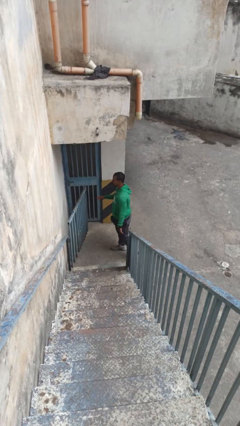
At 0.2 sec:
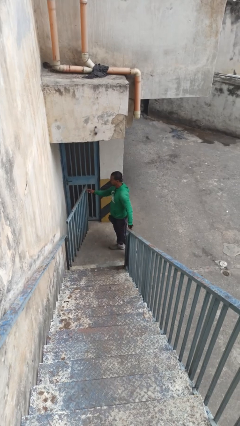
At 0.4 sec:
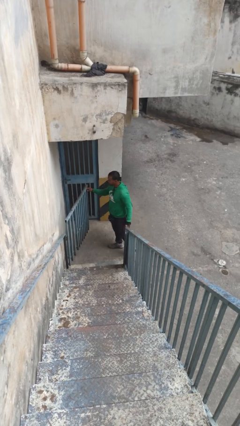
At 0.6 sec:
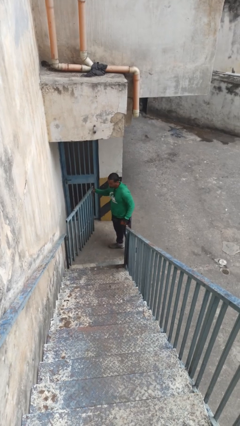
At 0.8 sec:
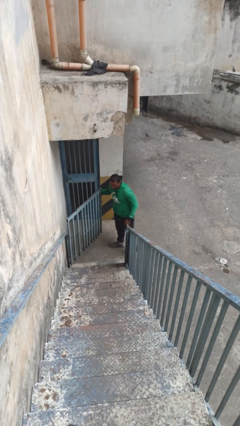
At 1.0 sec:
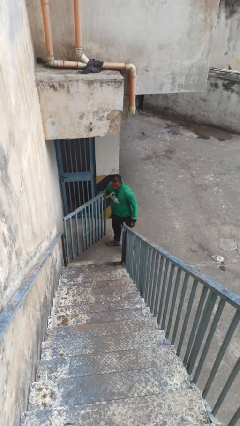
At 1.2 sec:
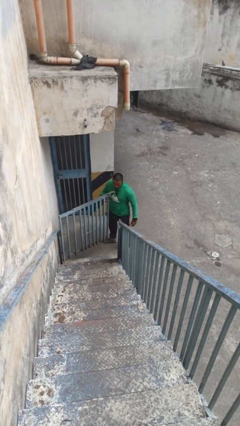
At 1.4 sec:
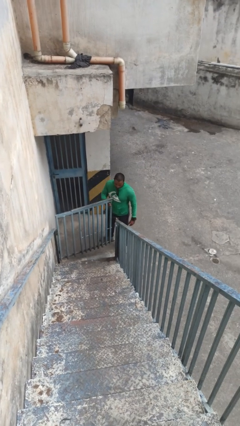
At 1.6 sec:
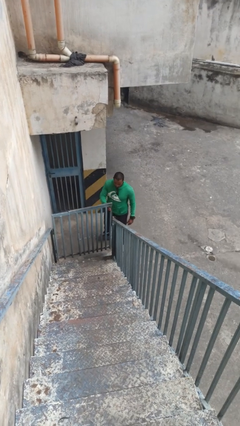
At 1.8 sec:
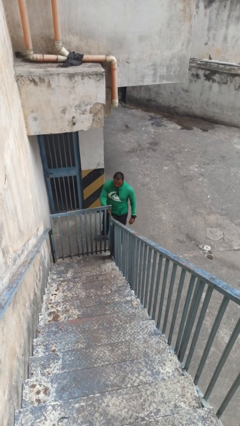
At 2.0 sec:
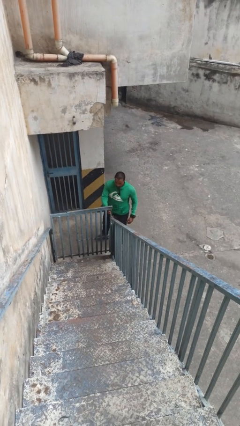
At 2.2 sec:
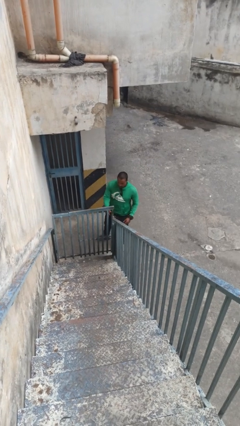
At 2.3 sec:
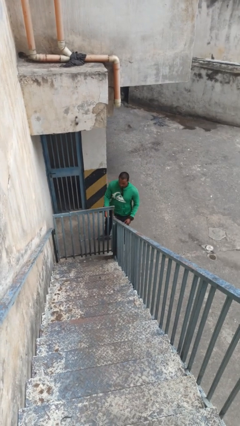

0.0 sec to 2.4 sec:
person closes facility door

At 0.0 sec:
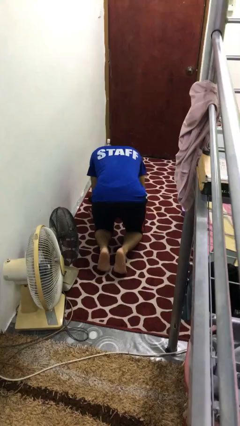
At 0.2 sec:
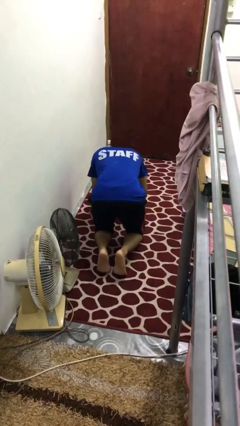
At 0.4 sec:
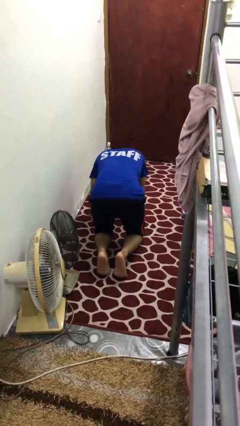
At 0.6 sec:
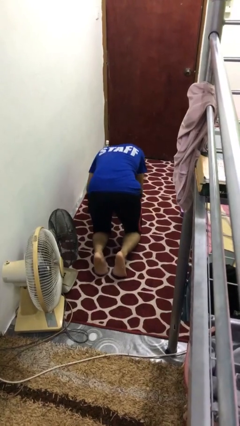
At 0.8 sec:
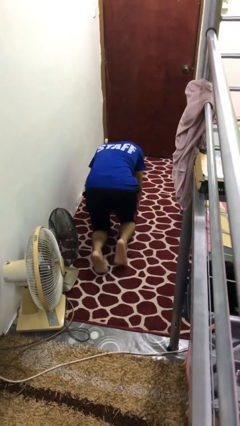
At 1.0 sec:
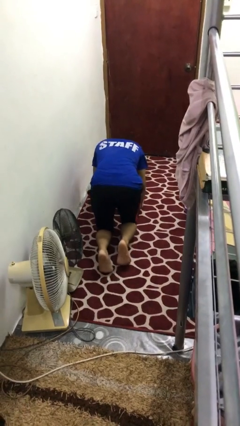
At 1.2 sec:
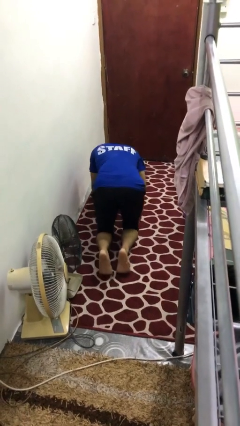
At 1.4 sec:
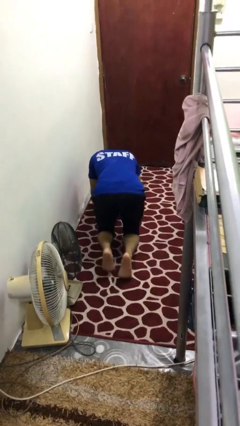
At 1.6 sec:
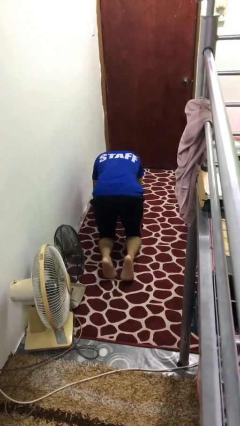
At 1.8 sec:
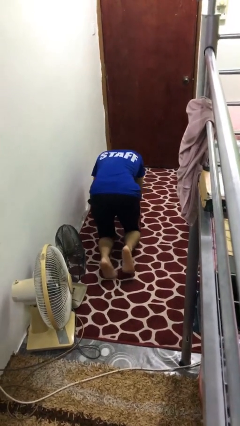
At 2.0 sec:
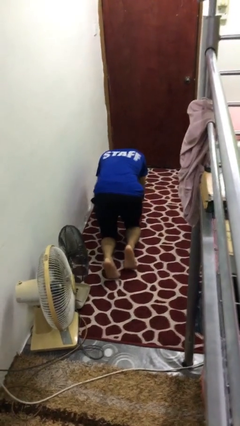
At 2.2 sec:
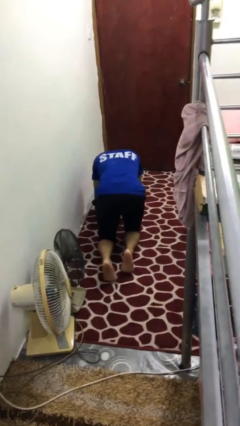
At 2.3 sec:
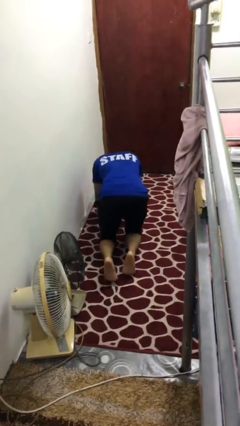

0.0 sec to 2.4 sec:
person crawls

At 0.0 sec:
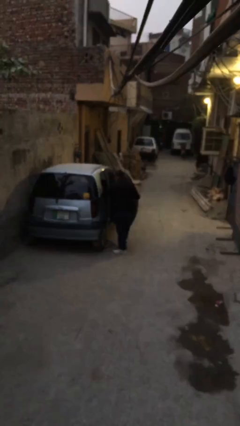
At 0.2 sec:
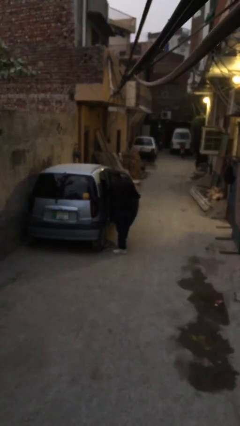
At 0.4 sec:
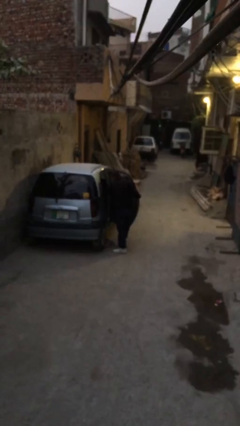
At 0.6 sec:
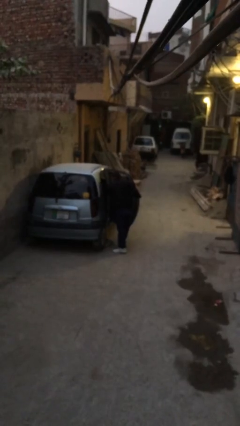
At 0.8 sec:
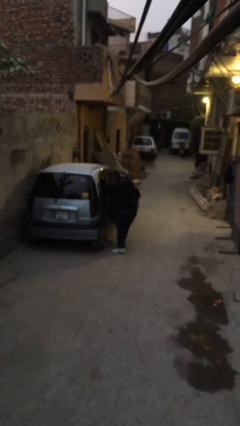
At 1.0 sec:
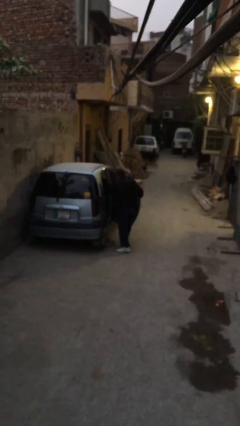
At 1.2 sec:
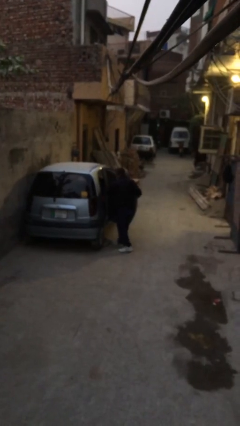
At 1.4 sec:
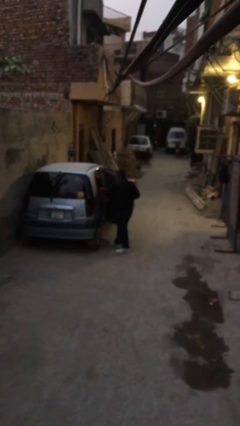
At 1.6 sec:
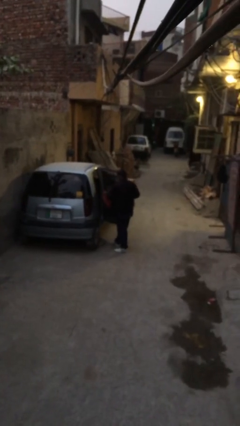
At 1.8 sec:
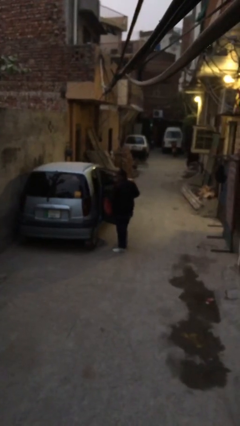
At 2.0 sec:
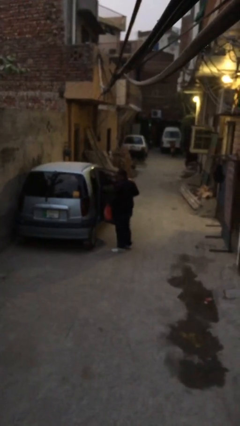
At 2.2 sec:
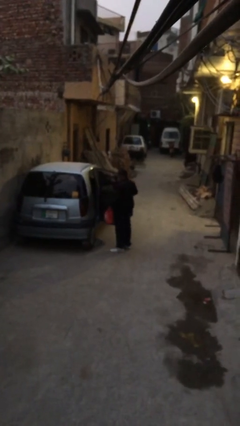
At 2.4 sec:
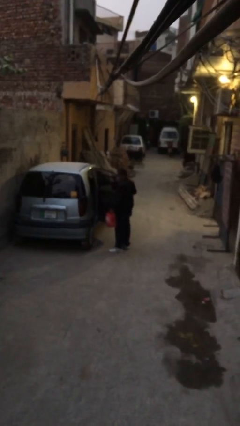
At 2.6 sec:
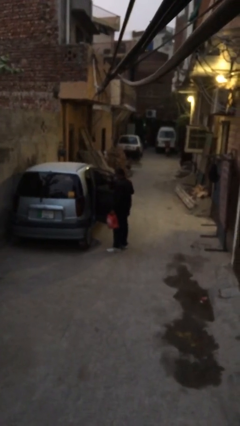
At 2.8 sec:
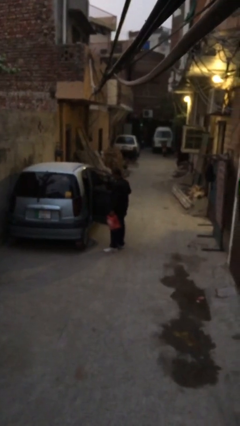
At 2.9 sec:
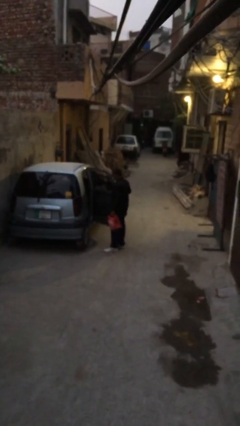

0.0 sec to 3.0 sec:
person unloads car

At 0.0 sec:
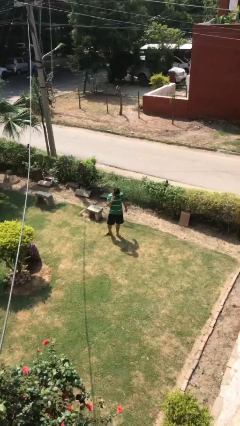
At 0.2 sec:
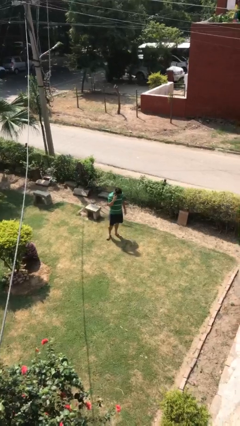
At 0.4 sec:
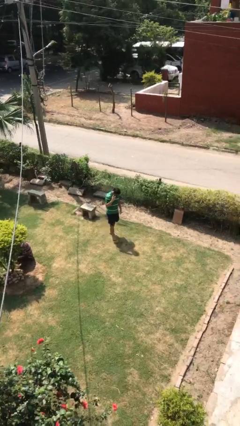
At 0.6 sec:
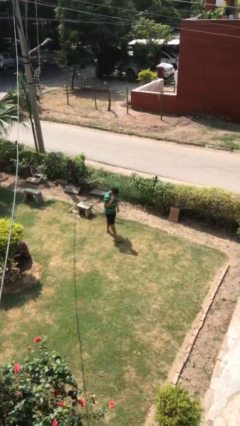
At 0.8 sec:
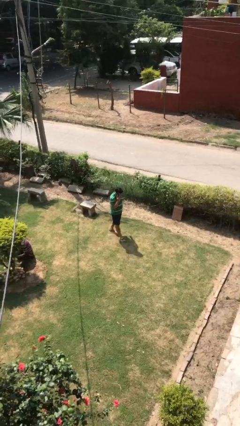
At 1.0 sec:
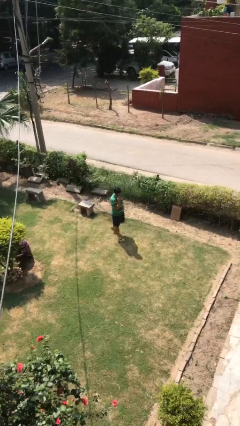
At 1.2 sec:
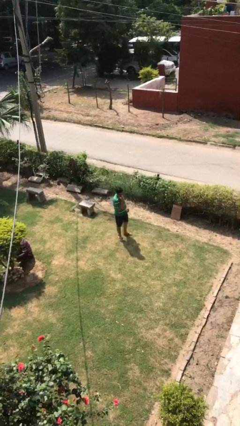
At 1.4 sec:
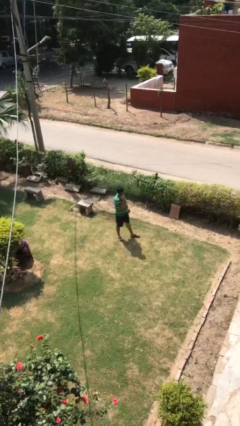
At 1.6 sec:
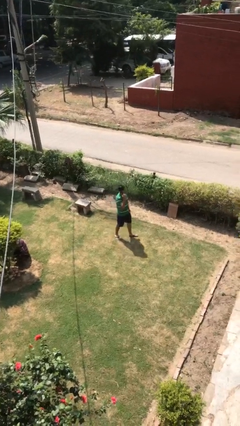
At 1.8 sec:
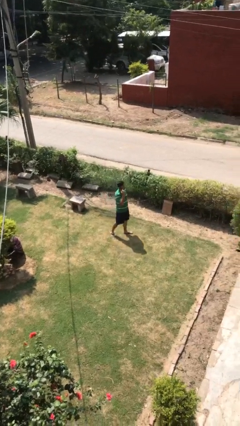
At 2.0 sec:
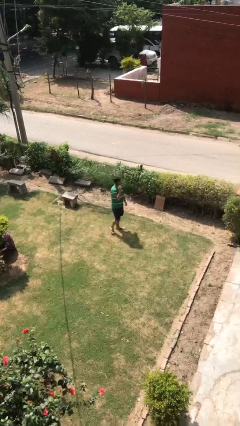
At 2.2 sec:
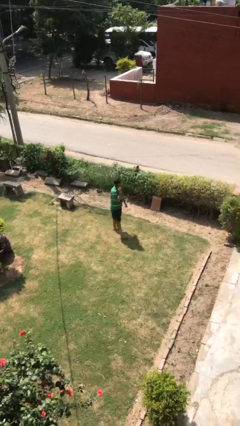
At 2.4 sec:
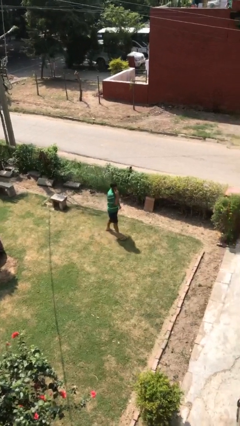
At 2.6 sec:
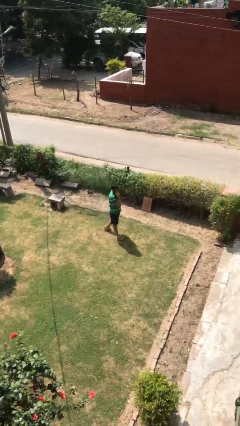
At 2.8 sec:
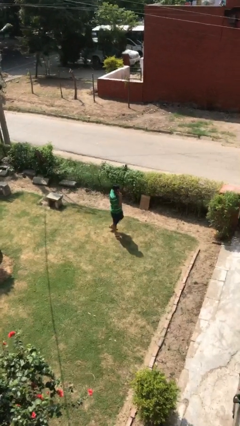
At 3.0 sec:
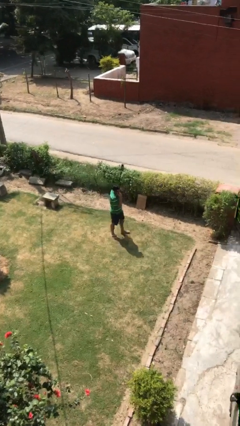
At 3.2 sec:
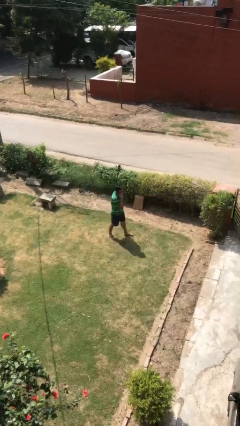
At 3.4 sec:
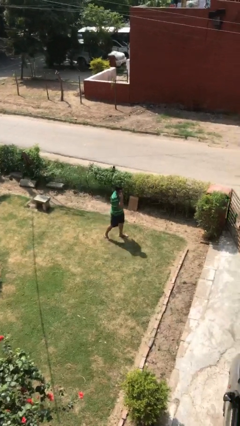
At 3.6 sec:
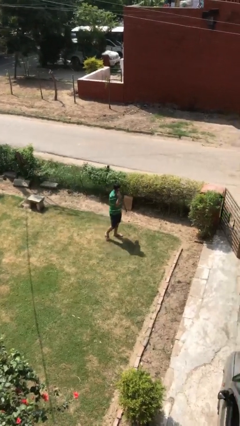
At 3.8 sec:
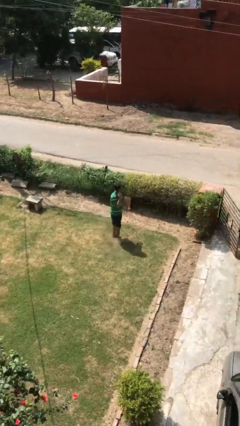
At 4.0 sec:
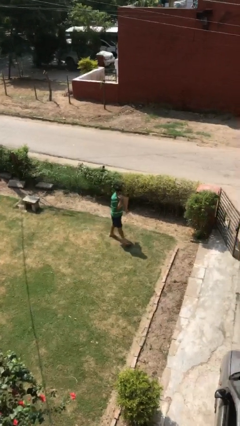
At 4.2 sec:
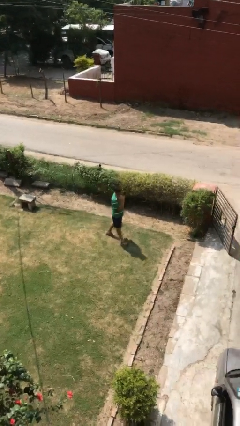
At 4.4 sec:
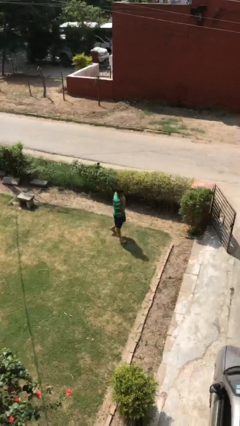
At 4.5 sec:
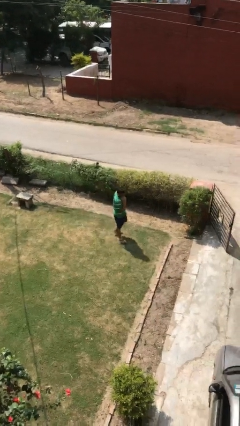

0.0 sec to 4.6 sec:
person talks on phone

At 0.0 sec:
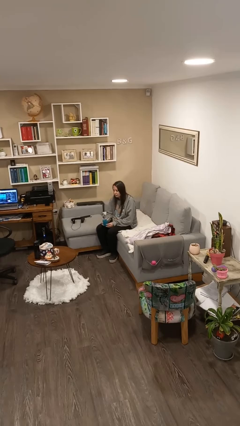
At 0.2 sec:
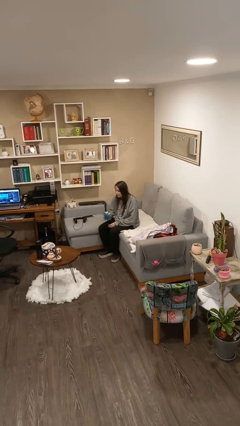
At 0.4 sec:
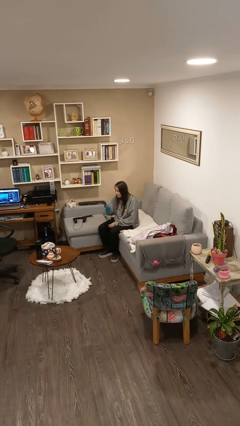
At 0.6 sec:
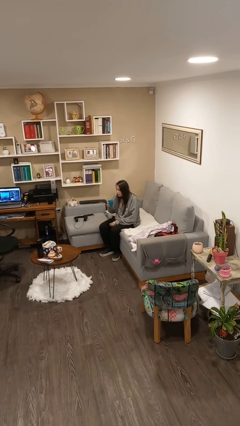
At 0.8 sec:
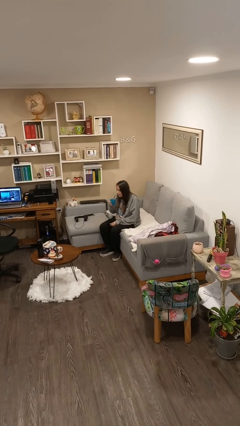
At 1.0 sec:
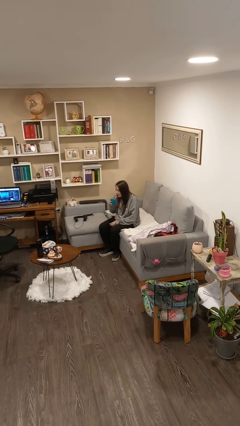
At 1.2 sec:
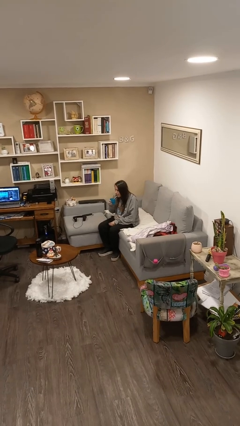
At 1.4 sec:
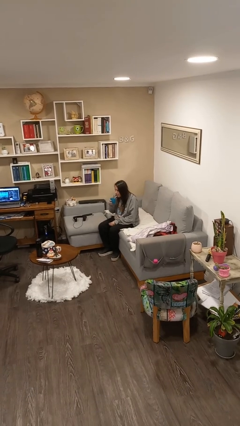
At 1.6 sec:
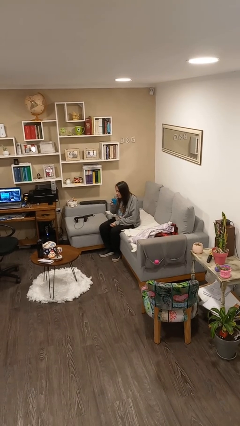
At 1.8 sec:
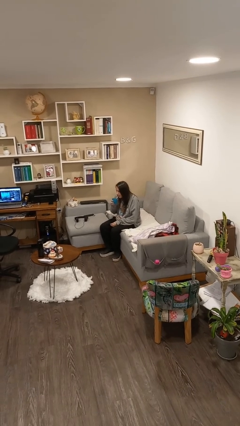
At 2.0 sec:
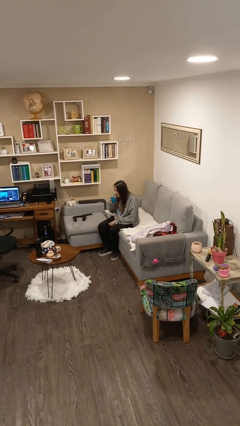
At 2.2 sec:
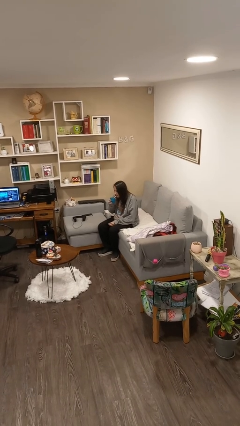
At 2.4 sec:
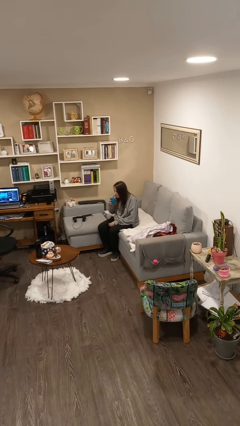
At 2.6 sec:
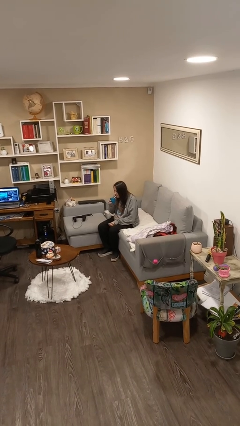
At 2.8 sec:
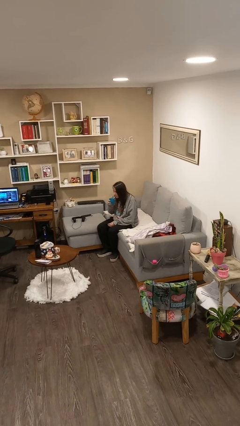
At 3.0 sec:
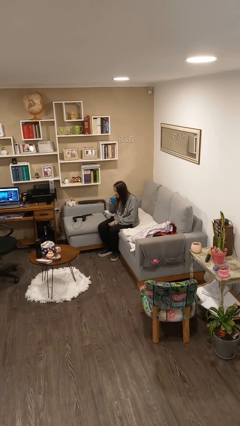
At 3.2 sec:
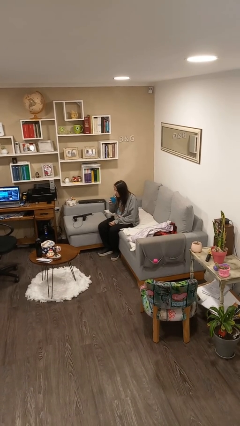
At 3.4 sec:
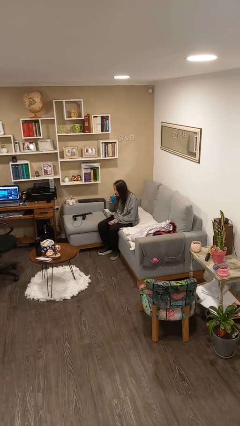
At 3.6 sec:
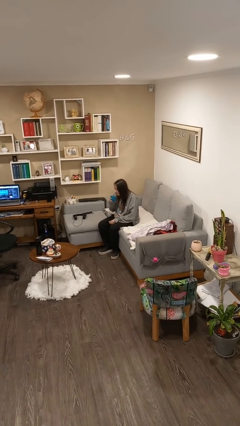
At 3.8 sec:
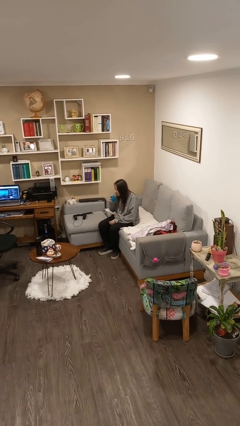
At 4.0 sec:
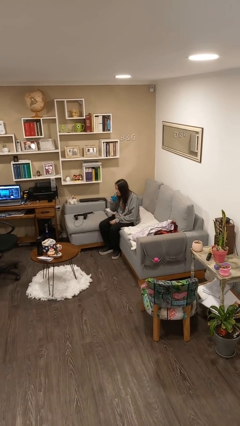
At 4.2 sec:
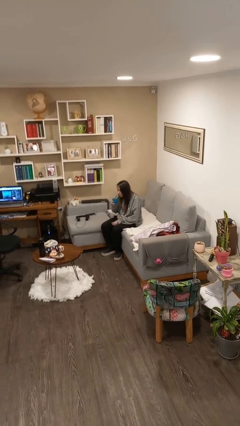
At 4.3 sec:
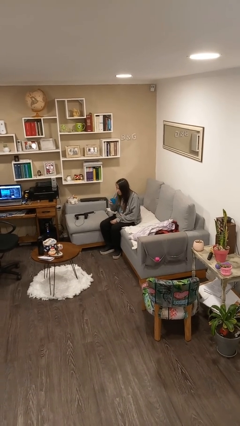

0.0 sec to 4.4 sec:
person drinks from straw

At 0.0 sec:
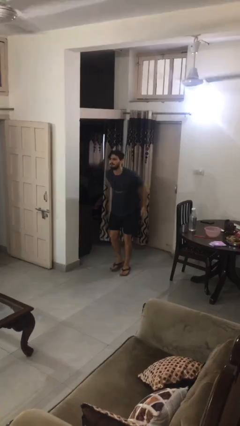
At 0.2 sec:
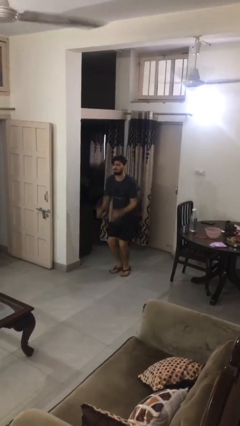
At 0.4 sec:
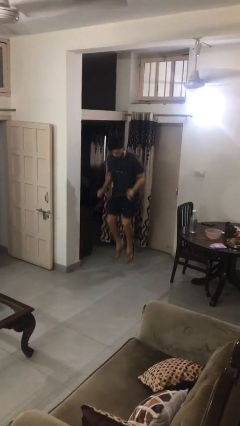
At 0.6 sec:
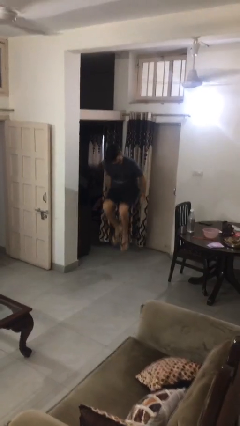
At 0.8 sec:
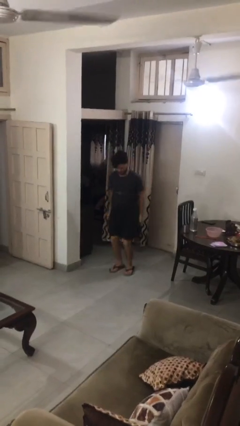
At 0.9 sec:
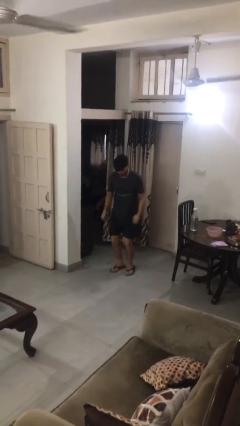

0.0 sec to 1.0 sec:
person jumps
